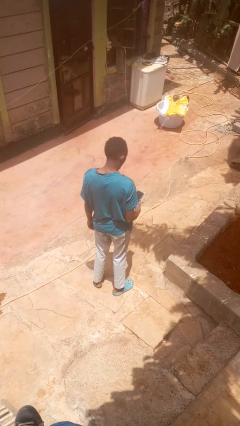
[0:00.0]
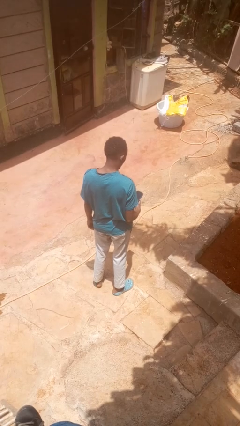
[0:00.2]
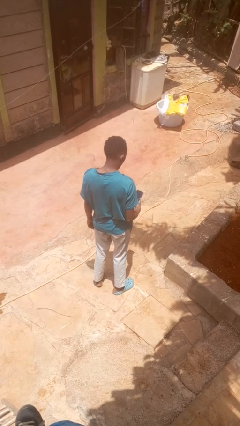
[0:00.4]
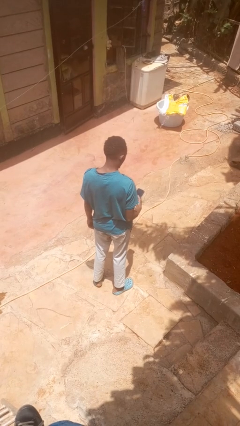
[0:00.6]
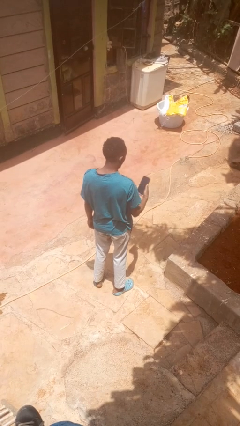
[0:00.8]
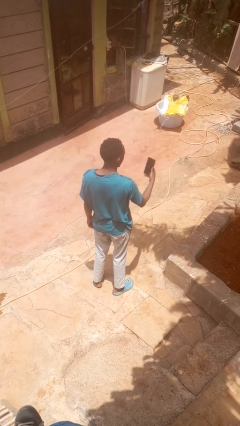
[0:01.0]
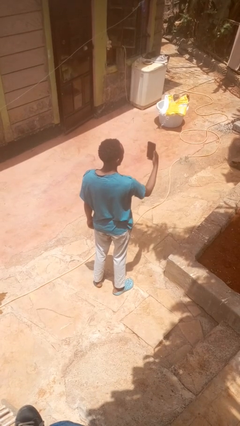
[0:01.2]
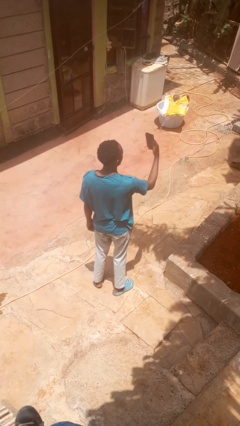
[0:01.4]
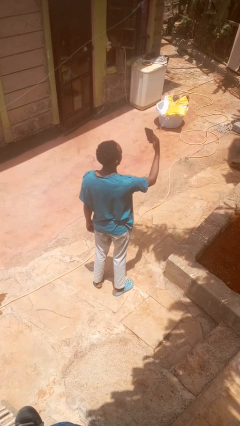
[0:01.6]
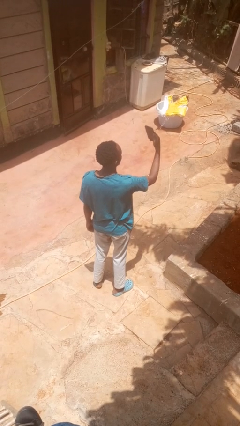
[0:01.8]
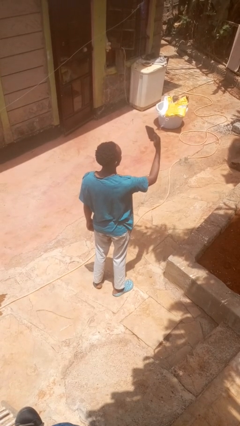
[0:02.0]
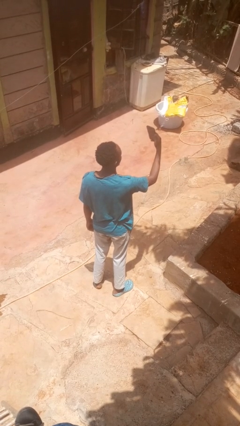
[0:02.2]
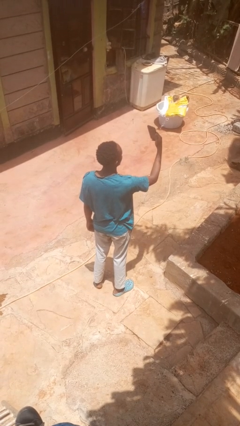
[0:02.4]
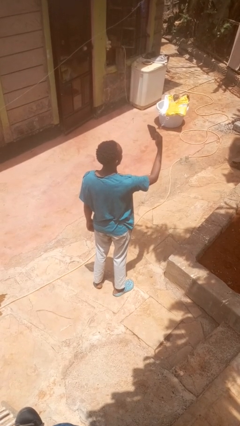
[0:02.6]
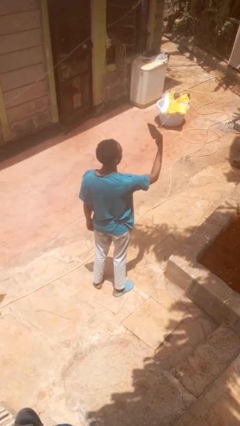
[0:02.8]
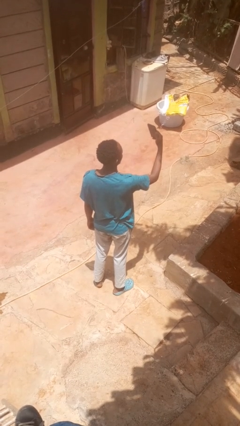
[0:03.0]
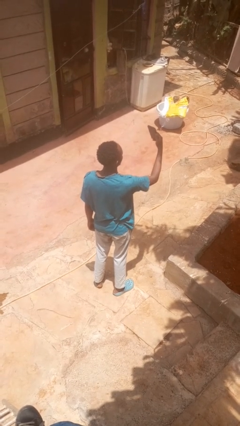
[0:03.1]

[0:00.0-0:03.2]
person takes selfie

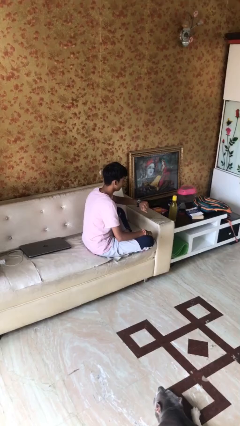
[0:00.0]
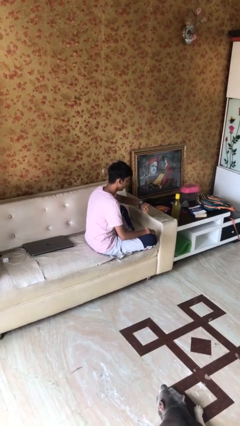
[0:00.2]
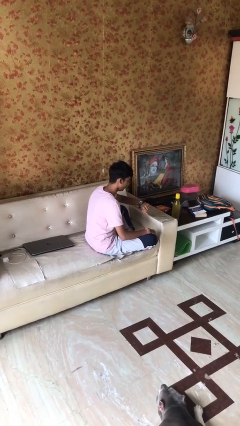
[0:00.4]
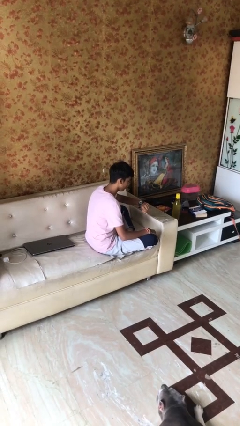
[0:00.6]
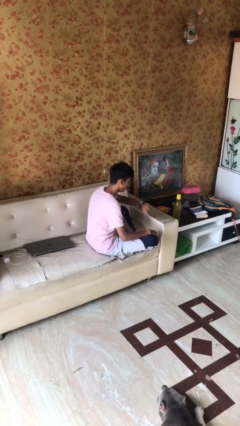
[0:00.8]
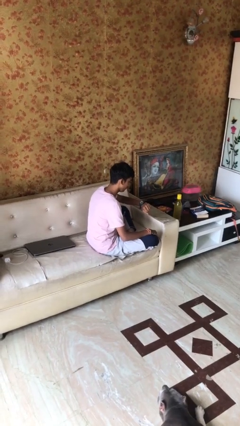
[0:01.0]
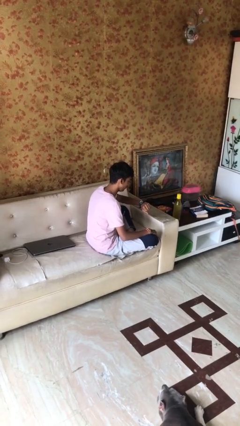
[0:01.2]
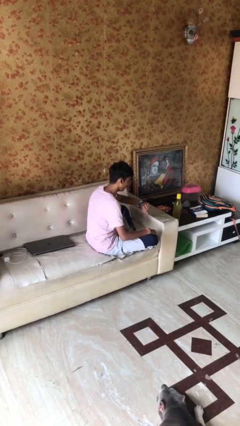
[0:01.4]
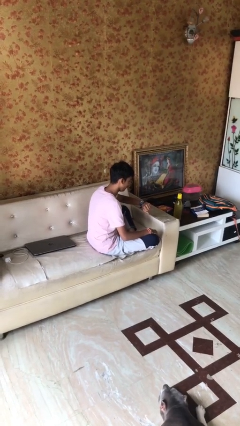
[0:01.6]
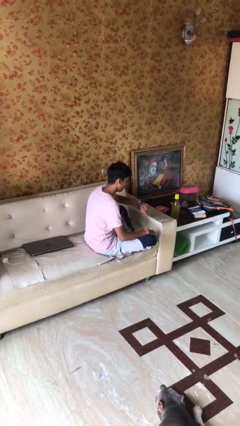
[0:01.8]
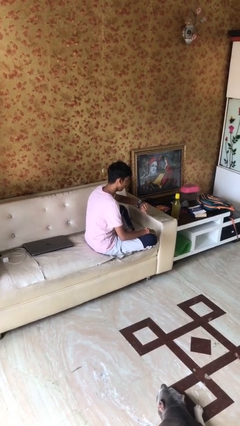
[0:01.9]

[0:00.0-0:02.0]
person looks at wristwatch

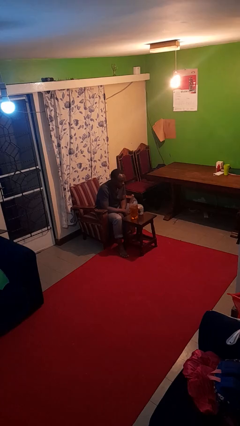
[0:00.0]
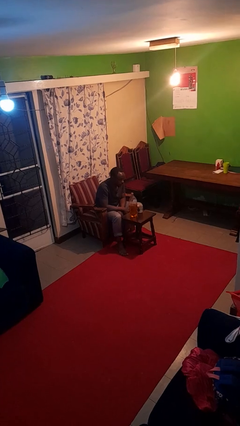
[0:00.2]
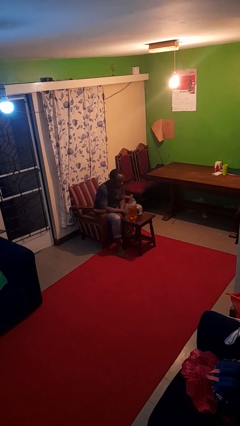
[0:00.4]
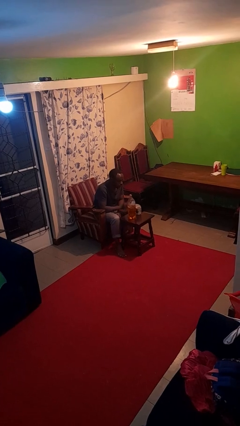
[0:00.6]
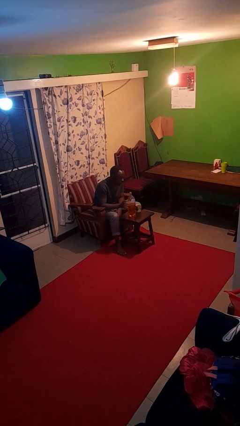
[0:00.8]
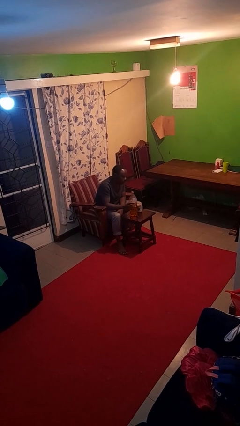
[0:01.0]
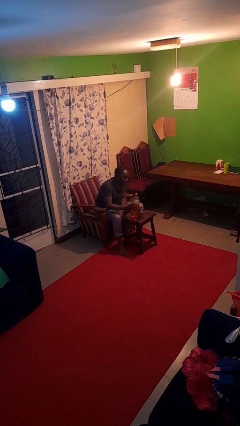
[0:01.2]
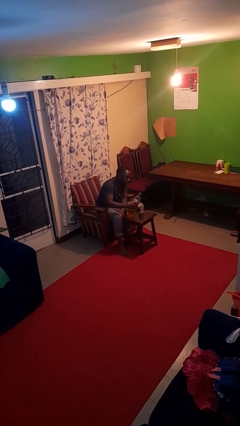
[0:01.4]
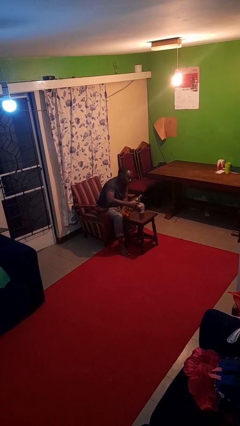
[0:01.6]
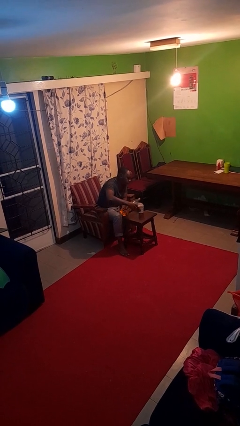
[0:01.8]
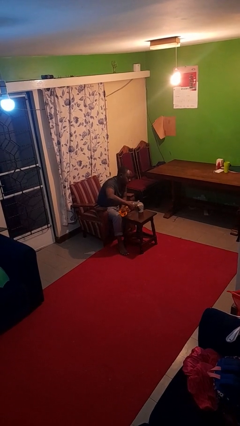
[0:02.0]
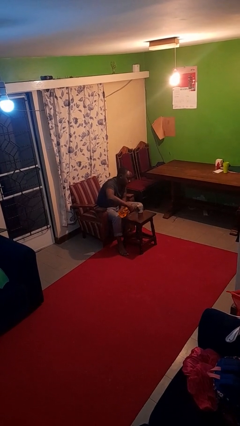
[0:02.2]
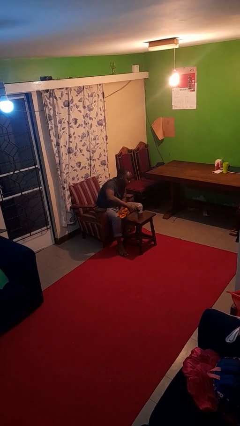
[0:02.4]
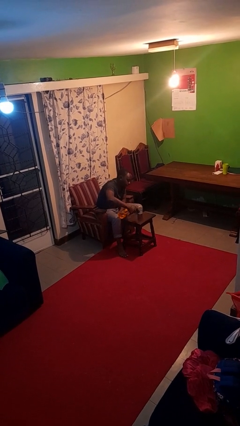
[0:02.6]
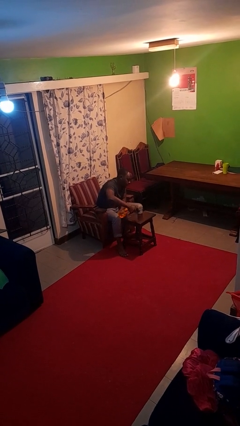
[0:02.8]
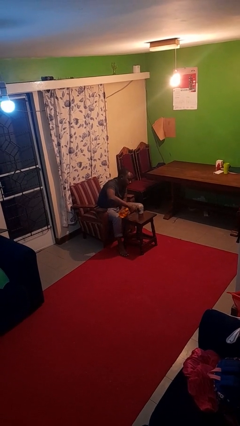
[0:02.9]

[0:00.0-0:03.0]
person pours liquid into cup

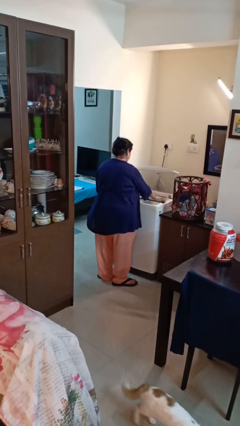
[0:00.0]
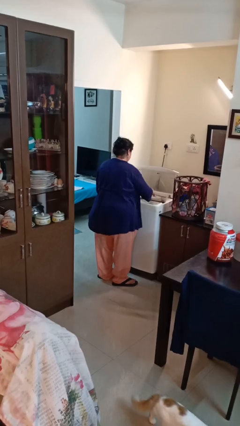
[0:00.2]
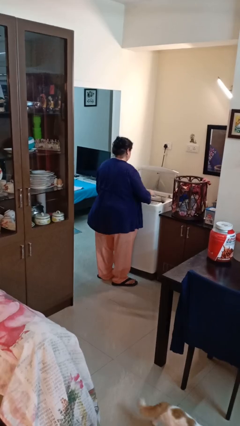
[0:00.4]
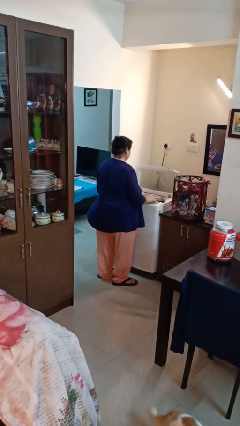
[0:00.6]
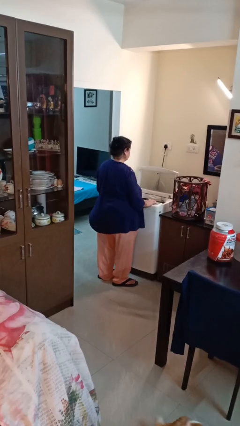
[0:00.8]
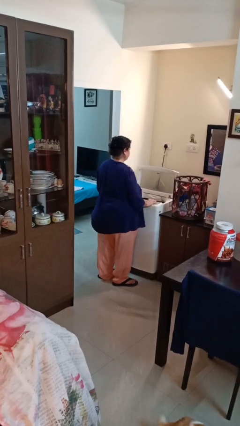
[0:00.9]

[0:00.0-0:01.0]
person loads clotheswasher

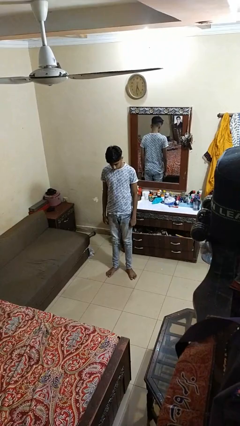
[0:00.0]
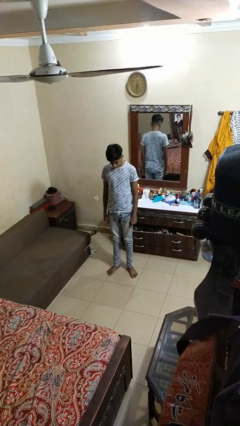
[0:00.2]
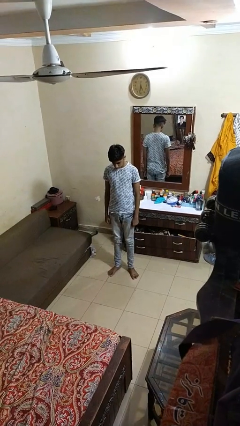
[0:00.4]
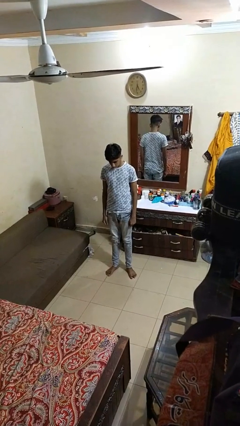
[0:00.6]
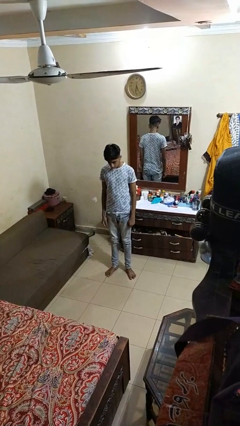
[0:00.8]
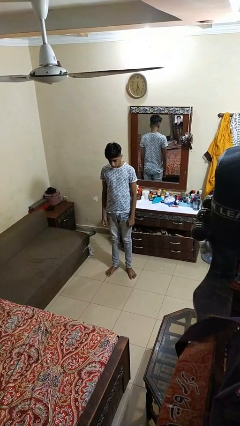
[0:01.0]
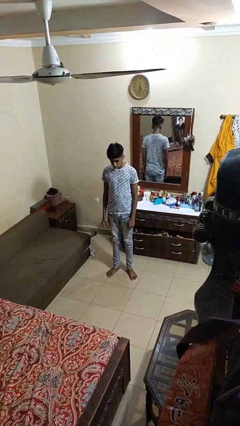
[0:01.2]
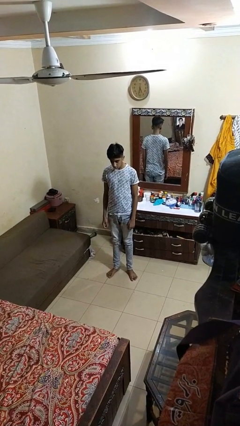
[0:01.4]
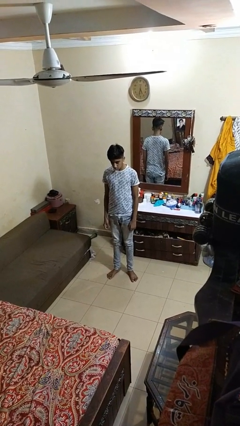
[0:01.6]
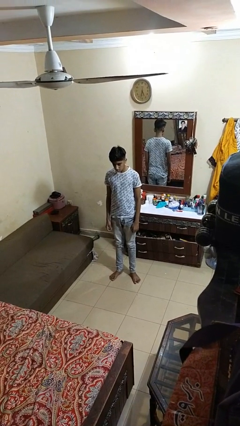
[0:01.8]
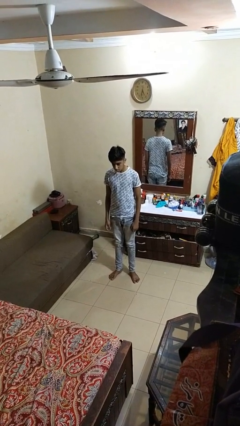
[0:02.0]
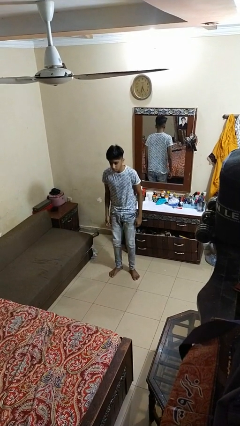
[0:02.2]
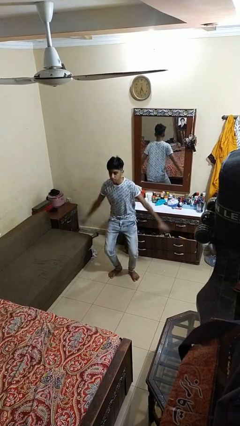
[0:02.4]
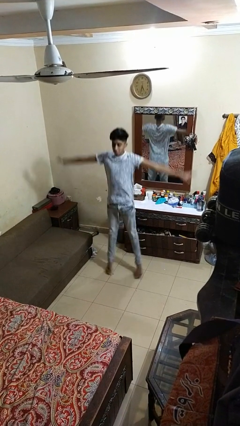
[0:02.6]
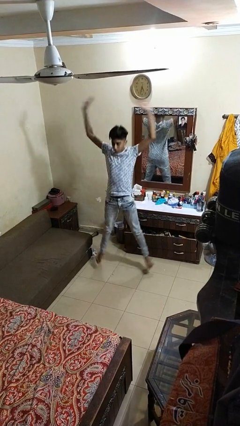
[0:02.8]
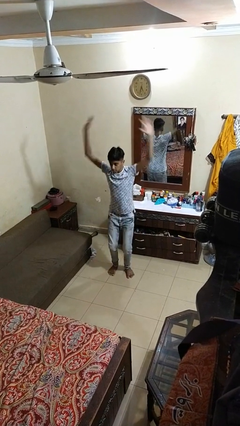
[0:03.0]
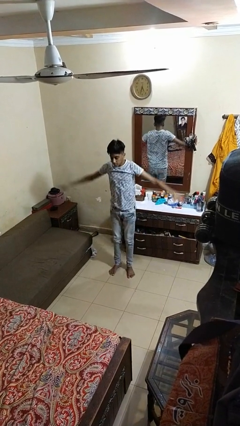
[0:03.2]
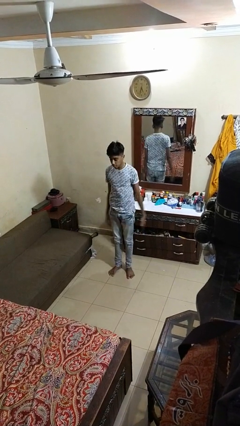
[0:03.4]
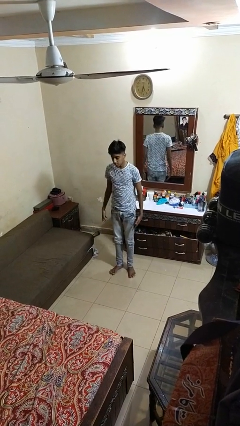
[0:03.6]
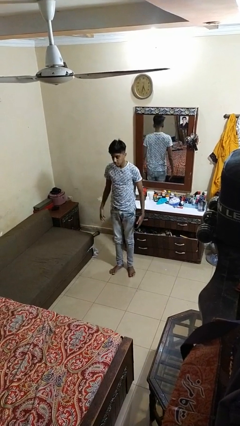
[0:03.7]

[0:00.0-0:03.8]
person exercises with jumping jacks

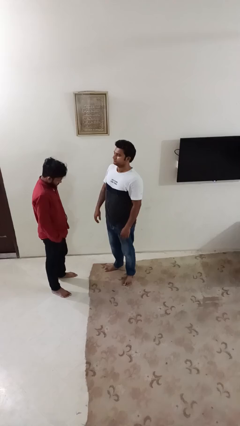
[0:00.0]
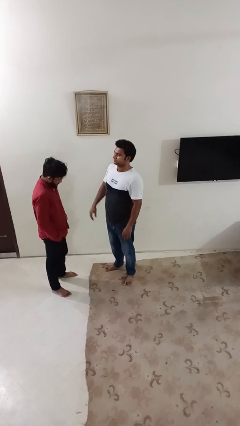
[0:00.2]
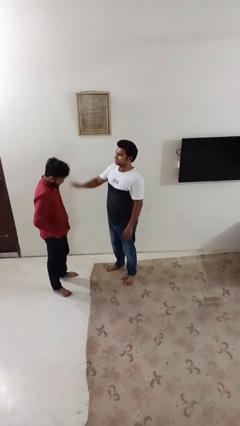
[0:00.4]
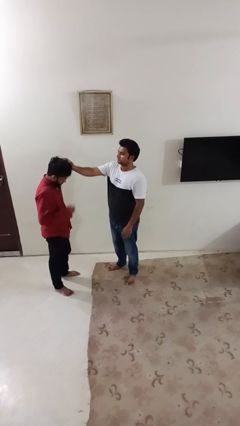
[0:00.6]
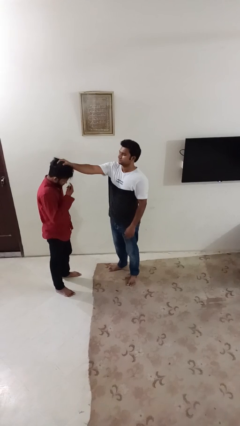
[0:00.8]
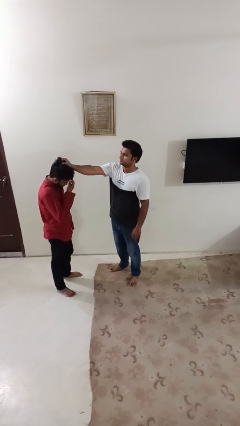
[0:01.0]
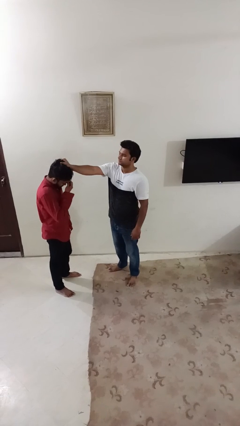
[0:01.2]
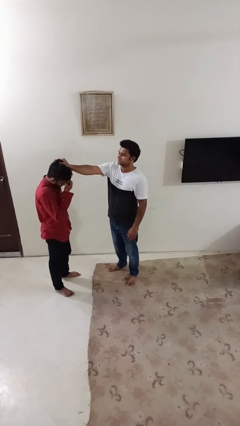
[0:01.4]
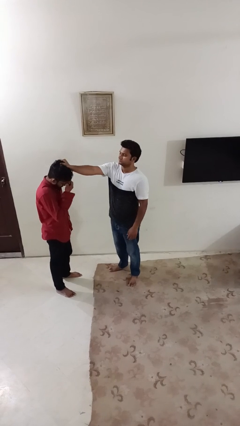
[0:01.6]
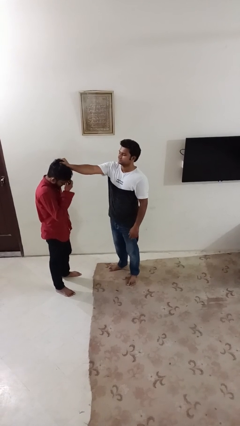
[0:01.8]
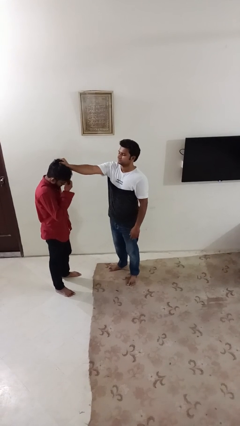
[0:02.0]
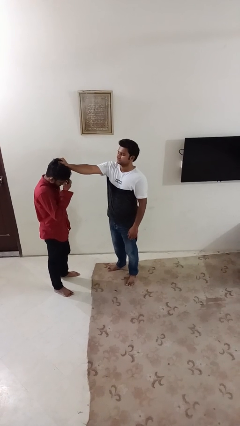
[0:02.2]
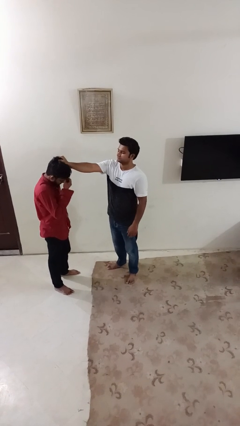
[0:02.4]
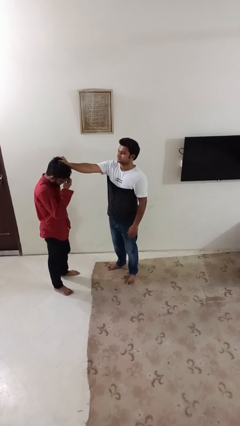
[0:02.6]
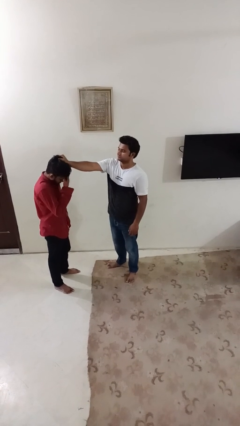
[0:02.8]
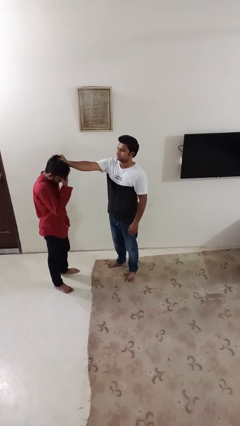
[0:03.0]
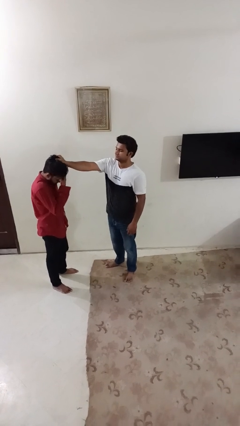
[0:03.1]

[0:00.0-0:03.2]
person grabs person by hair

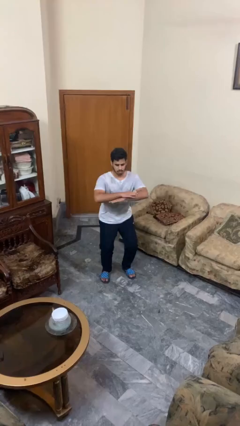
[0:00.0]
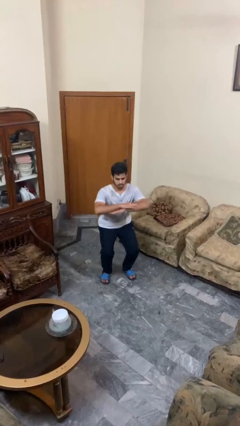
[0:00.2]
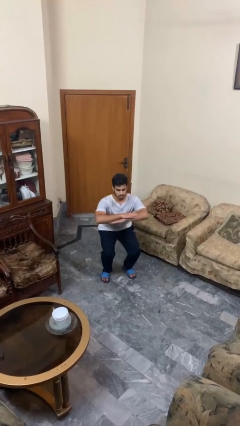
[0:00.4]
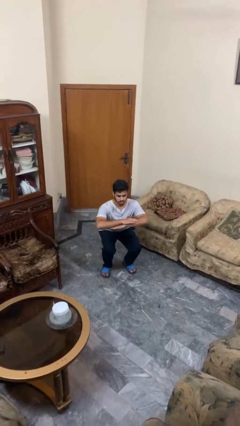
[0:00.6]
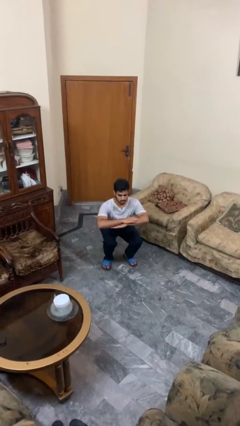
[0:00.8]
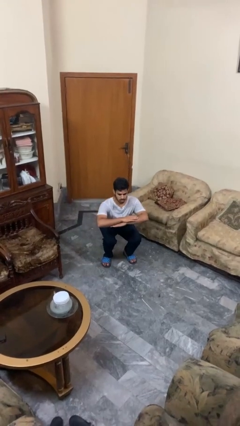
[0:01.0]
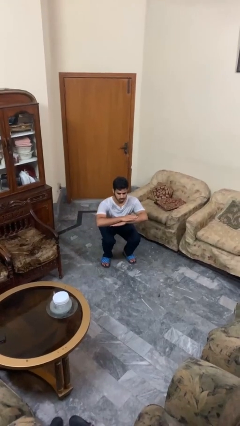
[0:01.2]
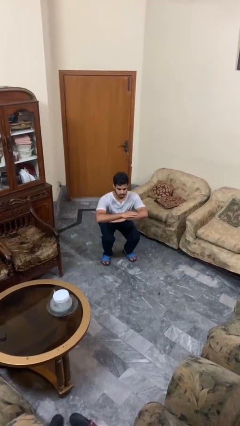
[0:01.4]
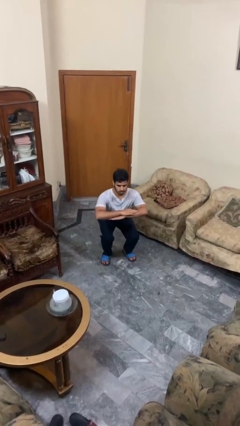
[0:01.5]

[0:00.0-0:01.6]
person squats
